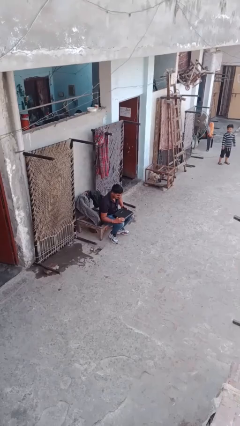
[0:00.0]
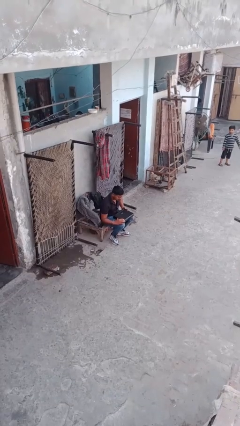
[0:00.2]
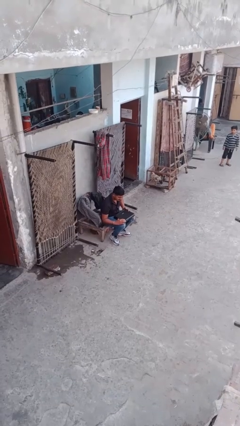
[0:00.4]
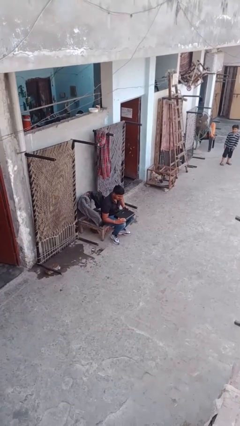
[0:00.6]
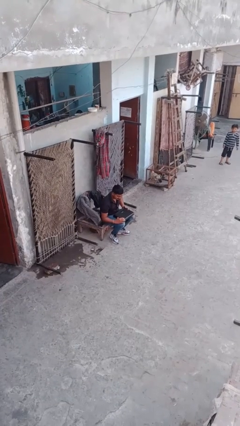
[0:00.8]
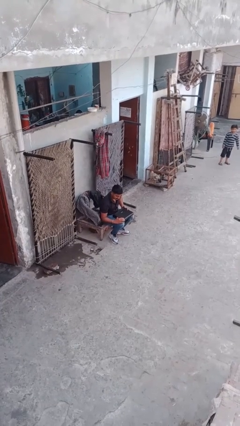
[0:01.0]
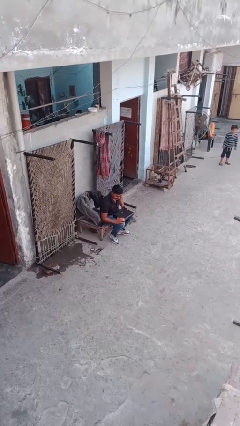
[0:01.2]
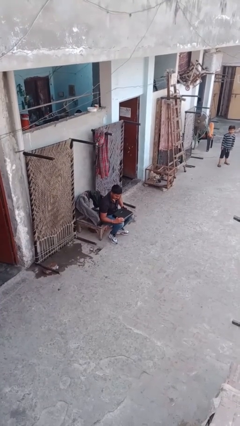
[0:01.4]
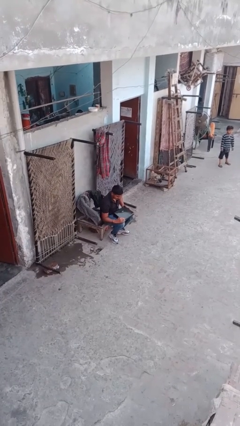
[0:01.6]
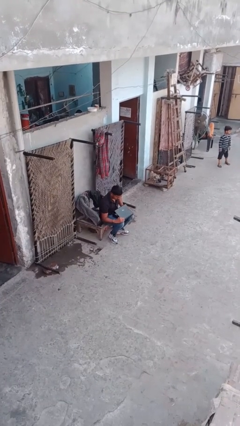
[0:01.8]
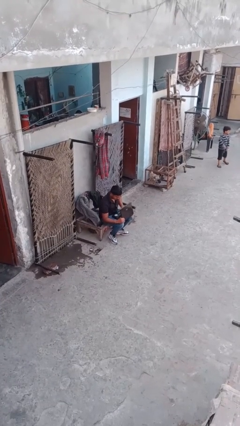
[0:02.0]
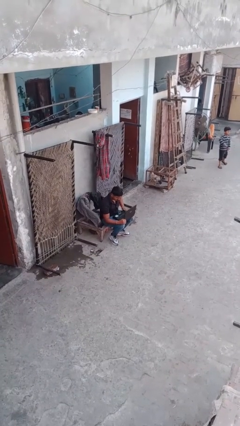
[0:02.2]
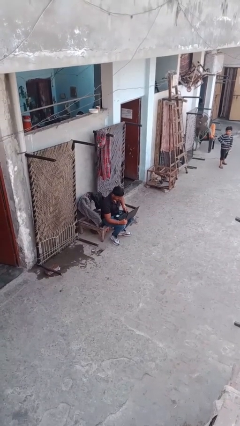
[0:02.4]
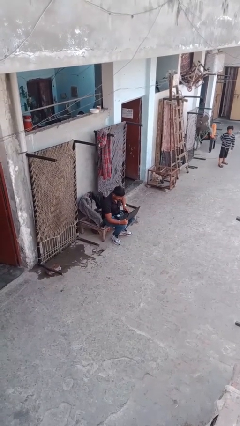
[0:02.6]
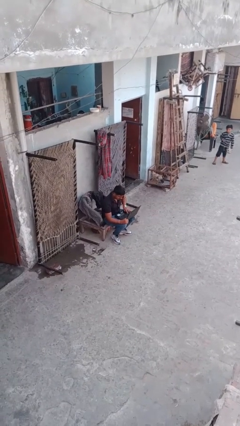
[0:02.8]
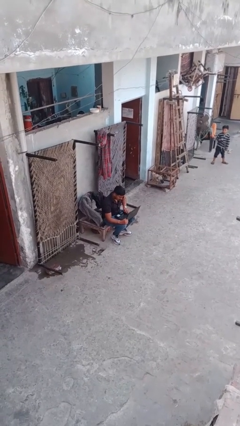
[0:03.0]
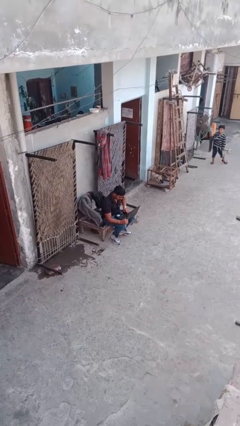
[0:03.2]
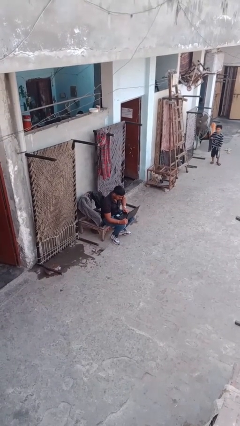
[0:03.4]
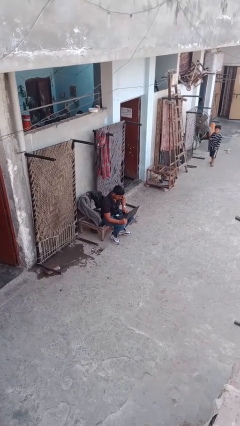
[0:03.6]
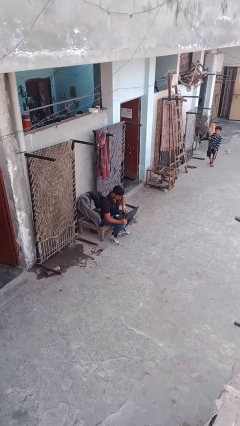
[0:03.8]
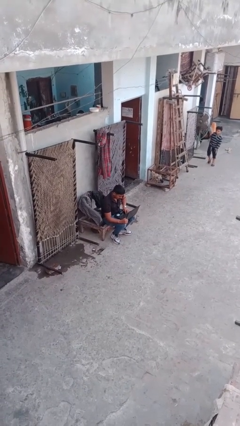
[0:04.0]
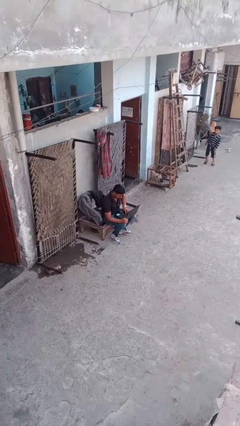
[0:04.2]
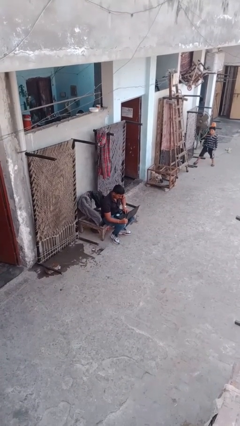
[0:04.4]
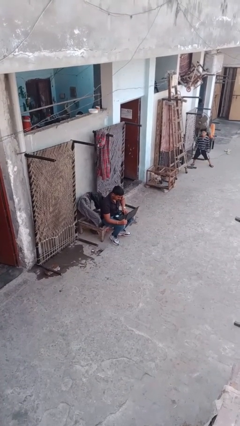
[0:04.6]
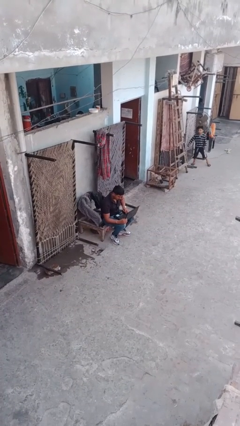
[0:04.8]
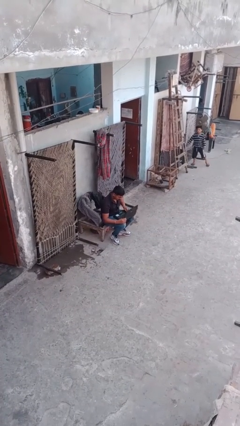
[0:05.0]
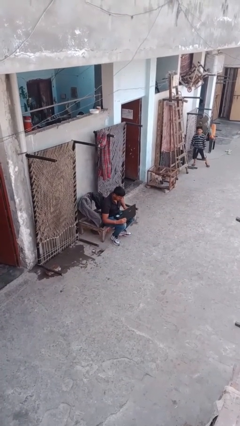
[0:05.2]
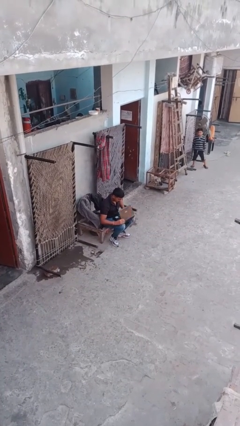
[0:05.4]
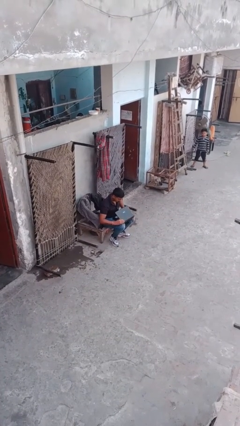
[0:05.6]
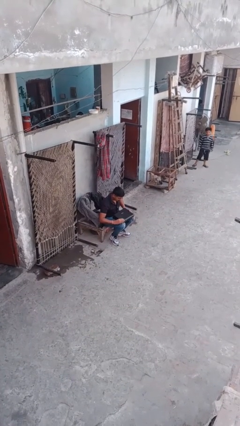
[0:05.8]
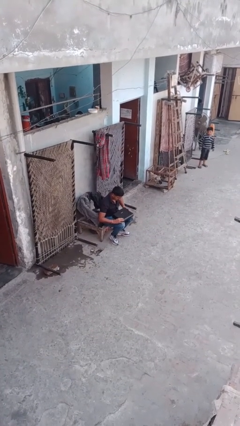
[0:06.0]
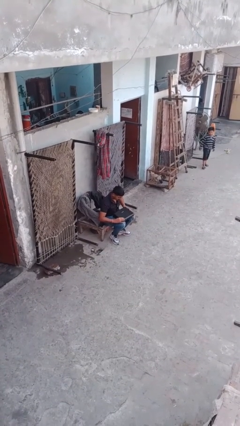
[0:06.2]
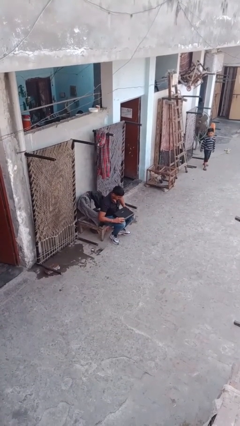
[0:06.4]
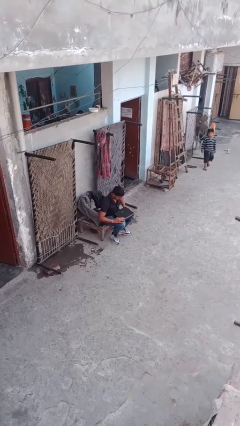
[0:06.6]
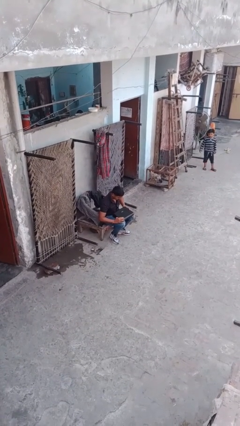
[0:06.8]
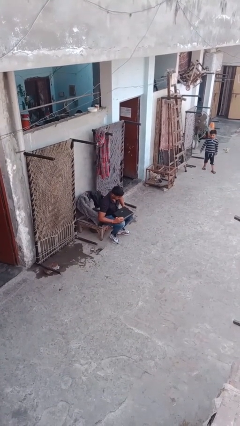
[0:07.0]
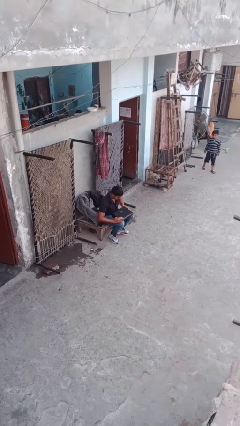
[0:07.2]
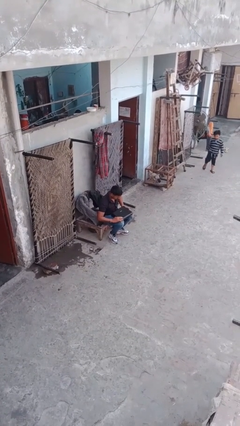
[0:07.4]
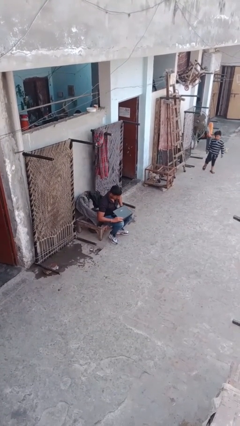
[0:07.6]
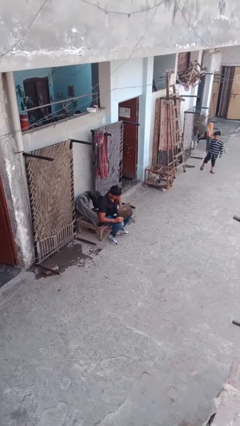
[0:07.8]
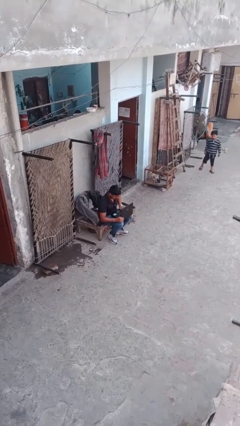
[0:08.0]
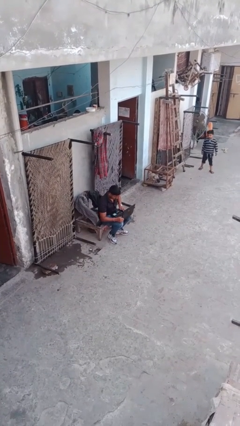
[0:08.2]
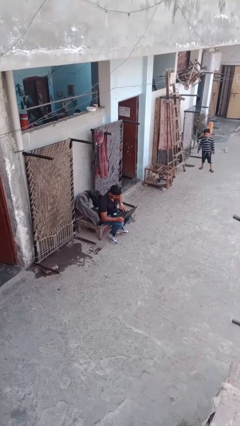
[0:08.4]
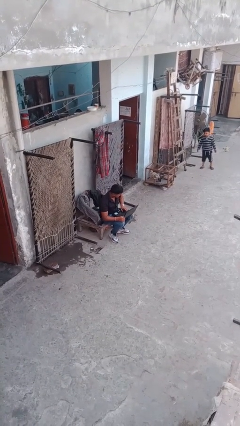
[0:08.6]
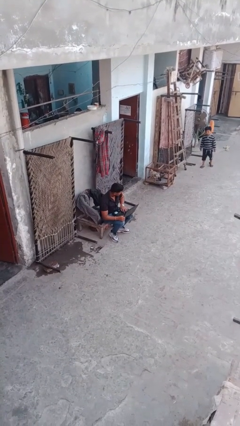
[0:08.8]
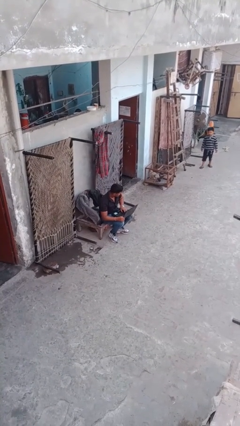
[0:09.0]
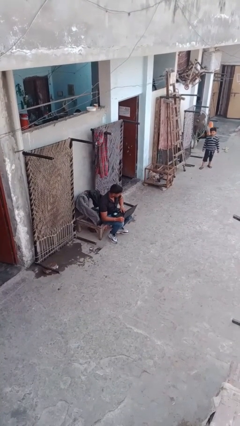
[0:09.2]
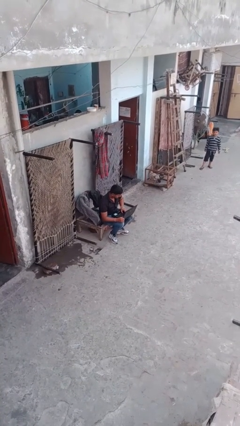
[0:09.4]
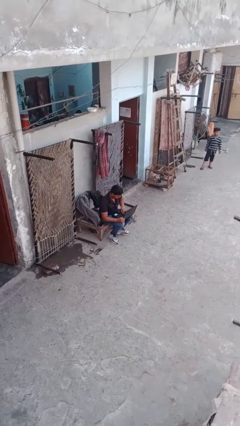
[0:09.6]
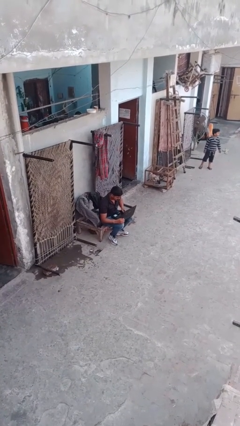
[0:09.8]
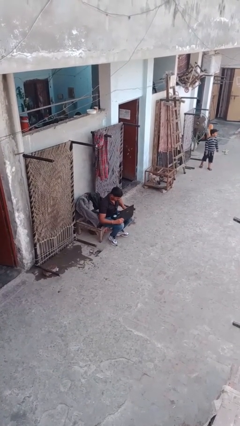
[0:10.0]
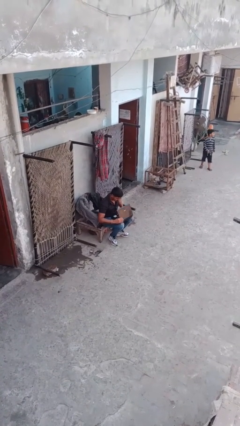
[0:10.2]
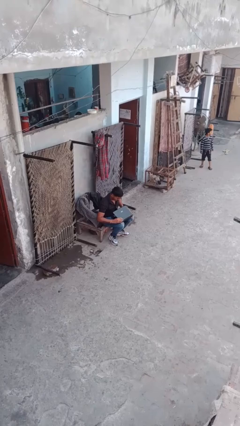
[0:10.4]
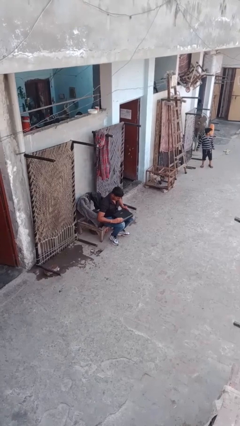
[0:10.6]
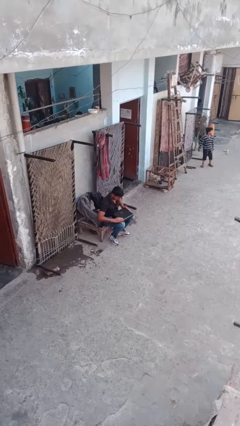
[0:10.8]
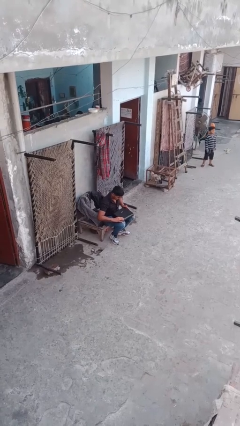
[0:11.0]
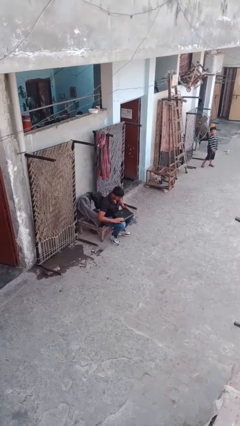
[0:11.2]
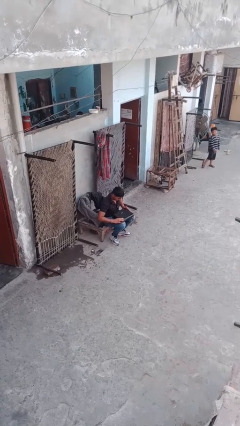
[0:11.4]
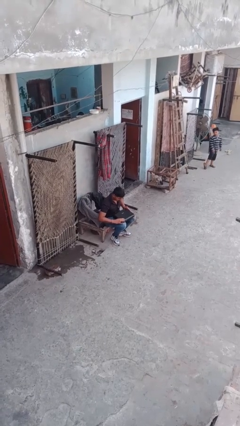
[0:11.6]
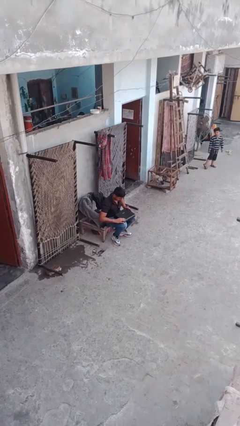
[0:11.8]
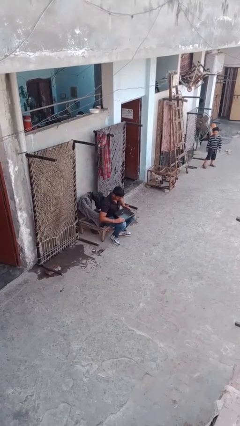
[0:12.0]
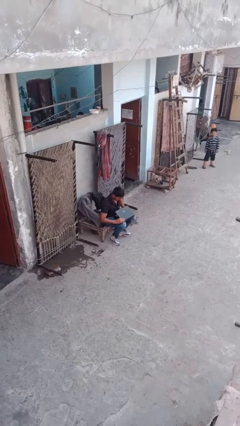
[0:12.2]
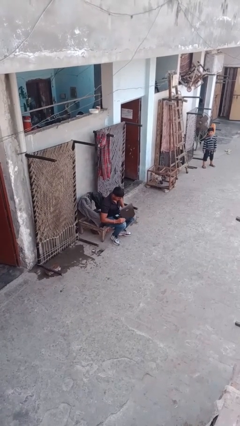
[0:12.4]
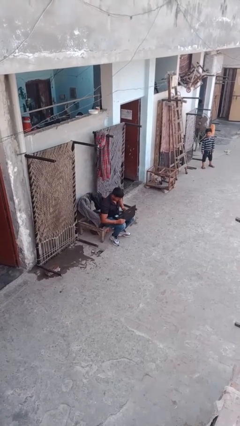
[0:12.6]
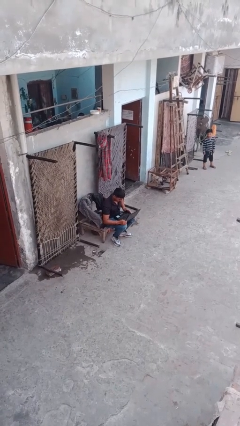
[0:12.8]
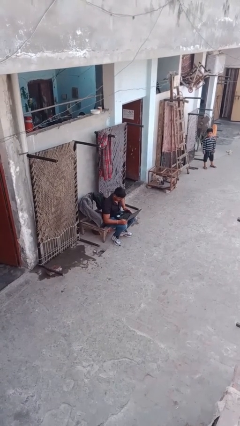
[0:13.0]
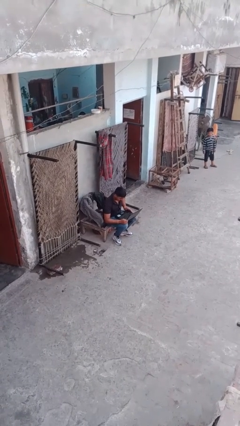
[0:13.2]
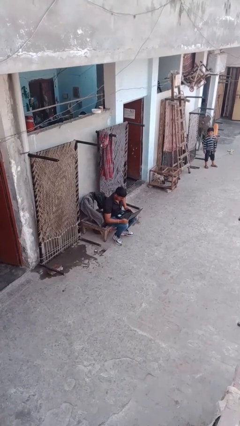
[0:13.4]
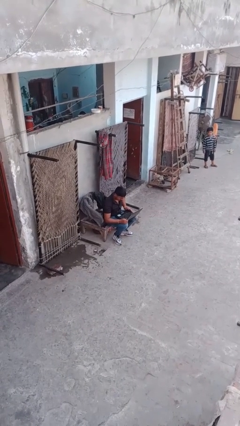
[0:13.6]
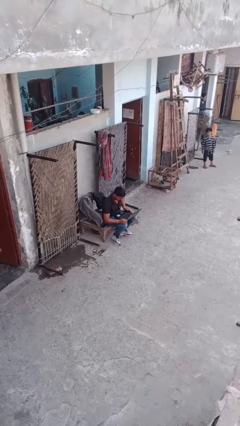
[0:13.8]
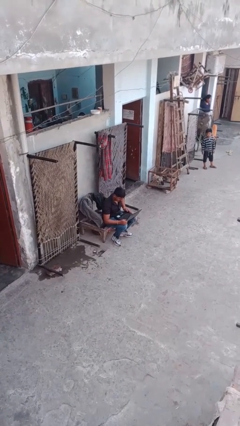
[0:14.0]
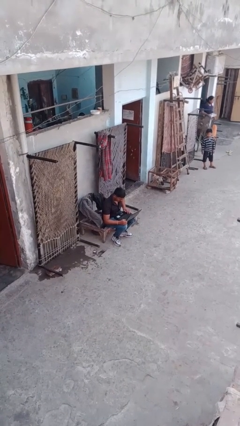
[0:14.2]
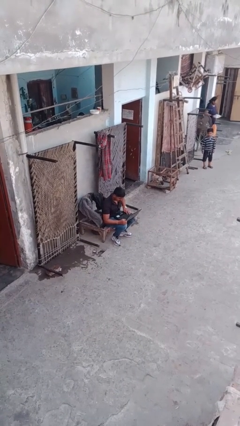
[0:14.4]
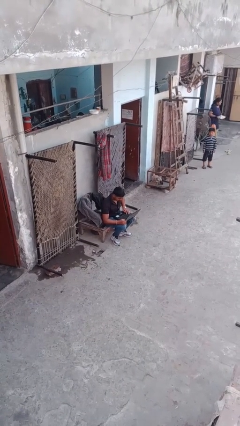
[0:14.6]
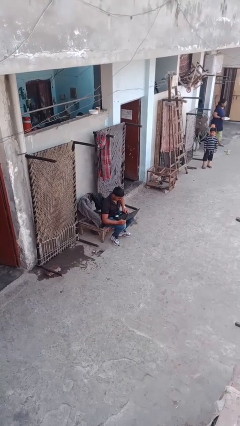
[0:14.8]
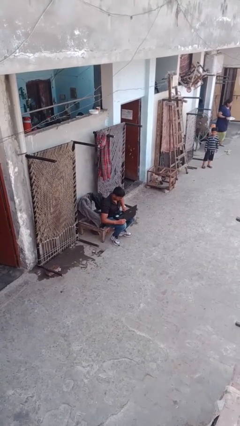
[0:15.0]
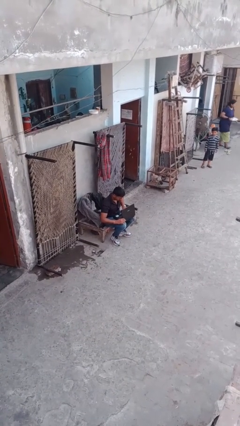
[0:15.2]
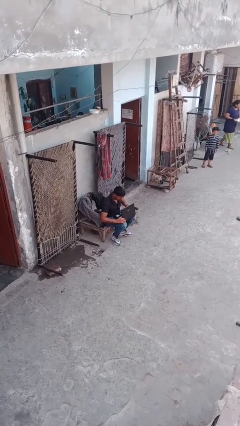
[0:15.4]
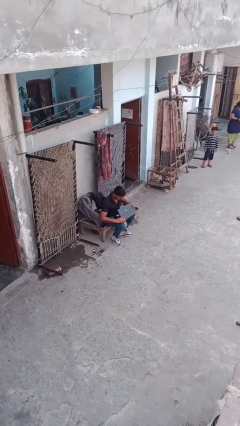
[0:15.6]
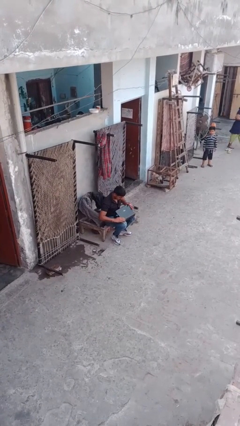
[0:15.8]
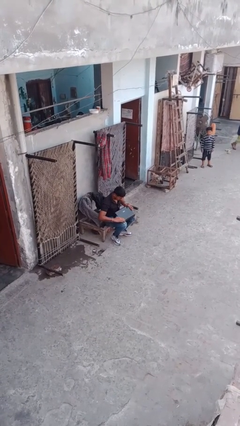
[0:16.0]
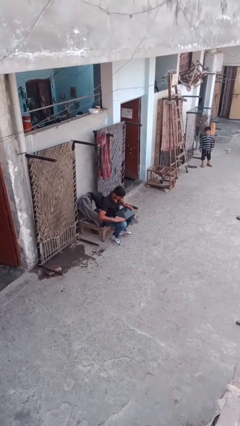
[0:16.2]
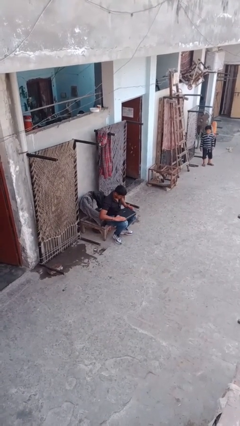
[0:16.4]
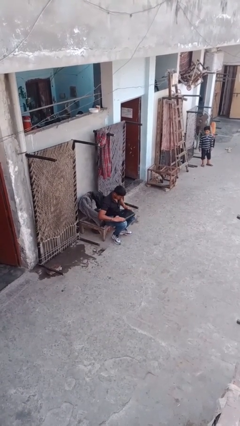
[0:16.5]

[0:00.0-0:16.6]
person interacts with laptop

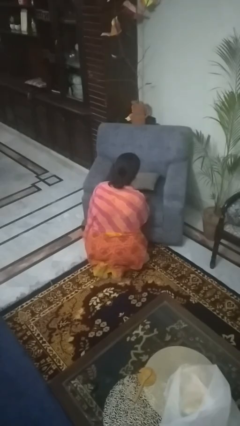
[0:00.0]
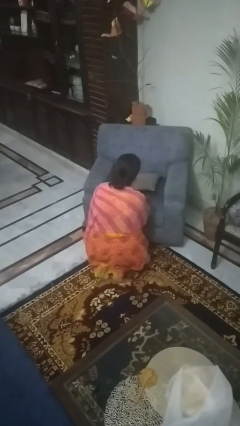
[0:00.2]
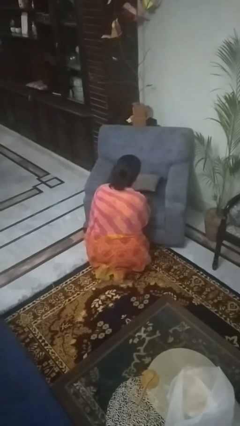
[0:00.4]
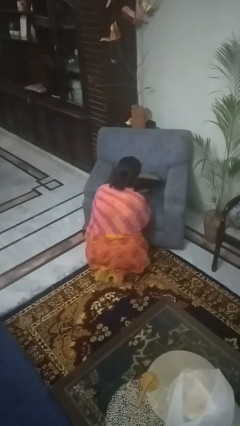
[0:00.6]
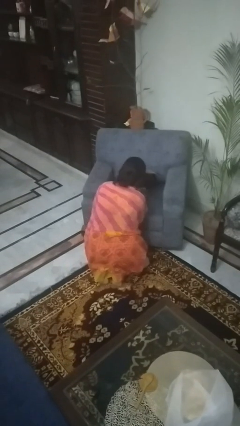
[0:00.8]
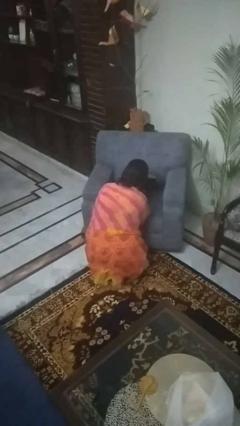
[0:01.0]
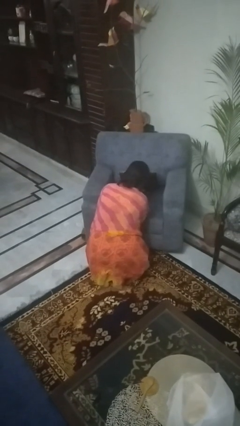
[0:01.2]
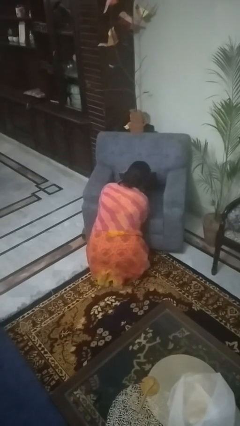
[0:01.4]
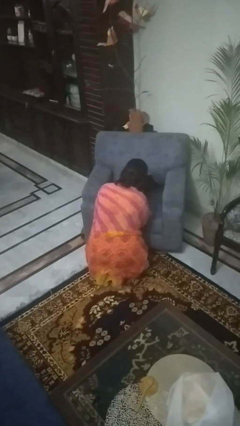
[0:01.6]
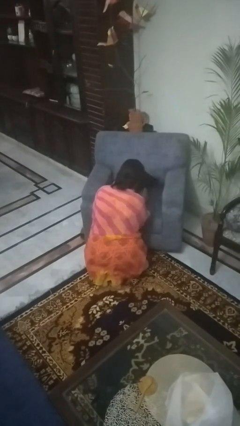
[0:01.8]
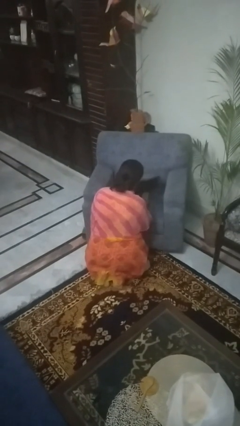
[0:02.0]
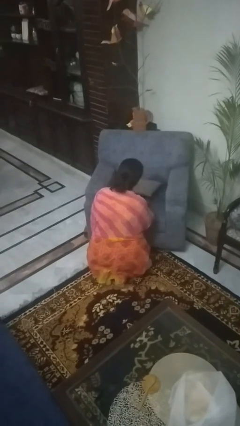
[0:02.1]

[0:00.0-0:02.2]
person searches in couch
